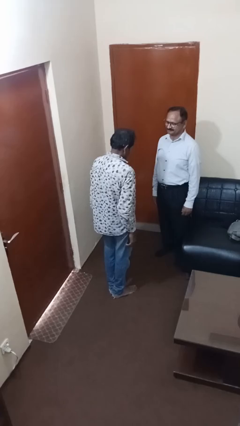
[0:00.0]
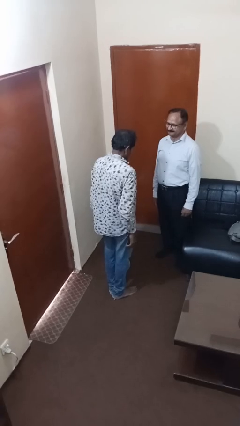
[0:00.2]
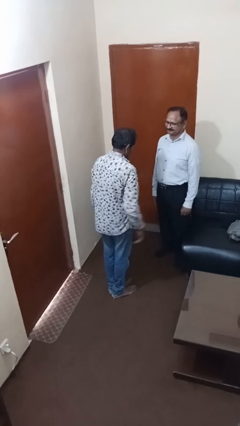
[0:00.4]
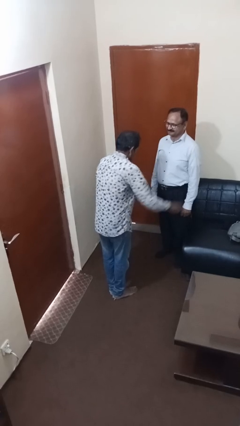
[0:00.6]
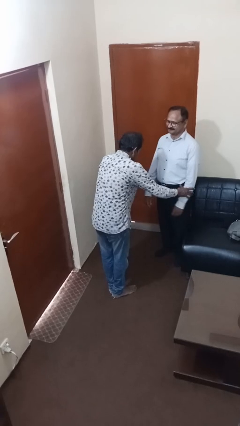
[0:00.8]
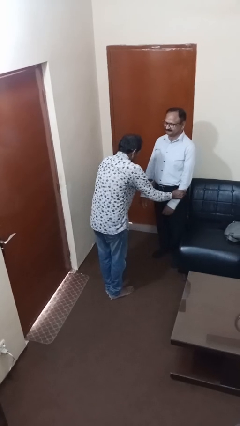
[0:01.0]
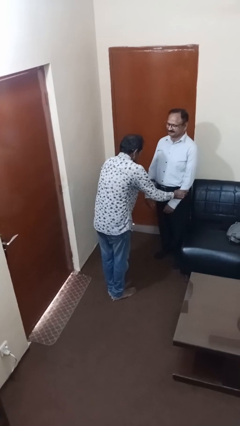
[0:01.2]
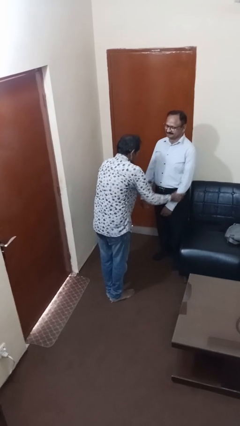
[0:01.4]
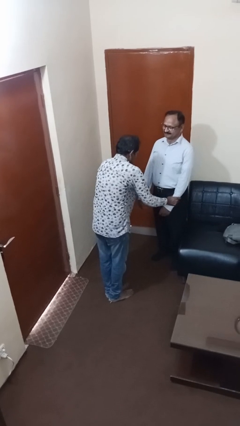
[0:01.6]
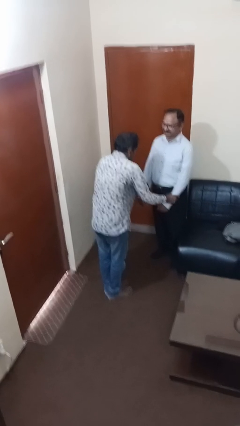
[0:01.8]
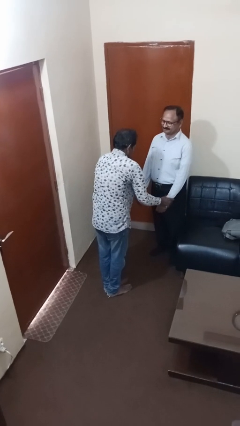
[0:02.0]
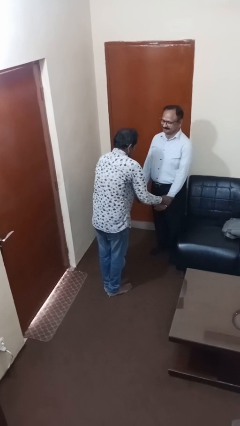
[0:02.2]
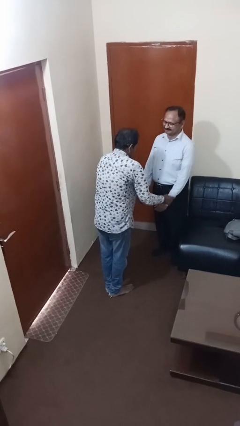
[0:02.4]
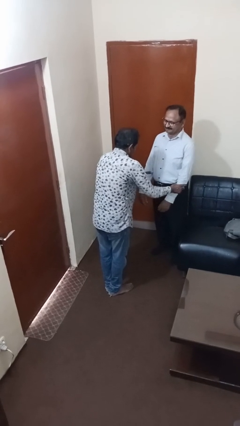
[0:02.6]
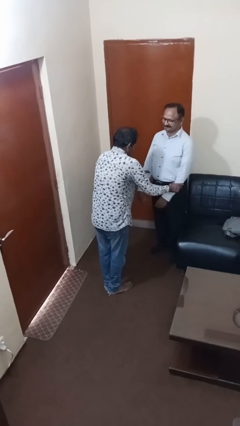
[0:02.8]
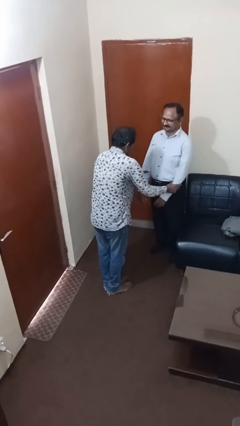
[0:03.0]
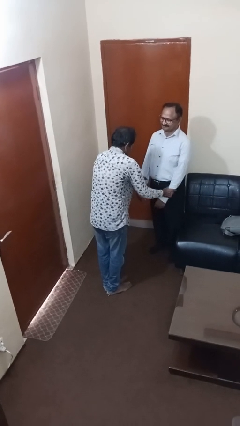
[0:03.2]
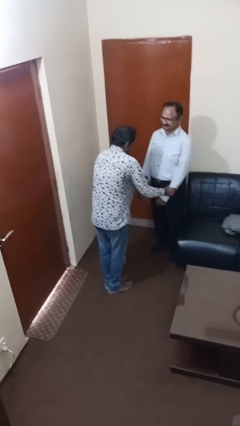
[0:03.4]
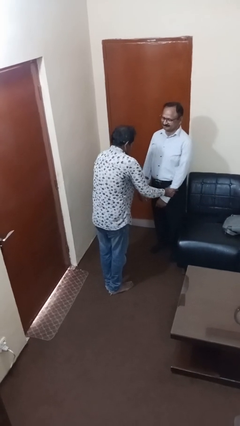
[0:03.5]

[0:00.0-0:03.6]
person grabs person by forearm

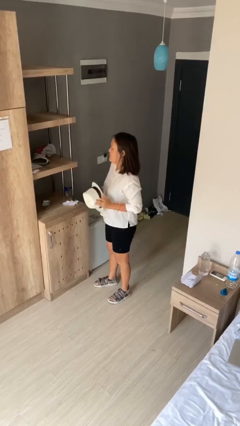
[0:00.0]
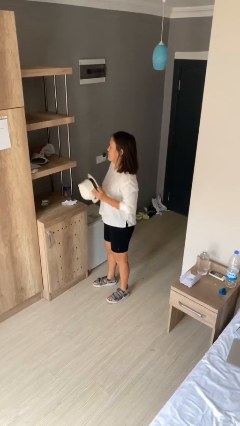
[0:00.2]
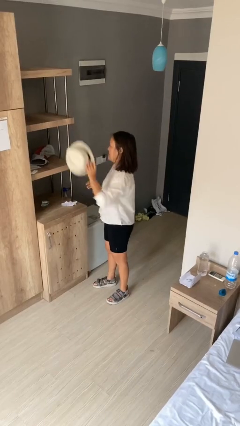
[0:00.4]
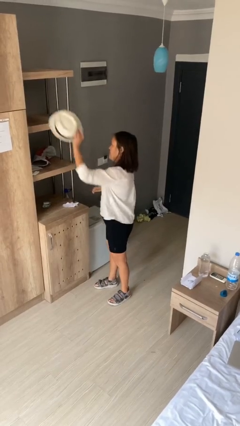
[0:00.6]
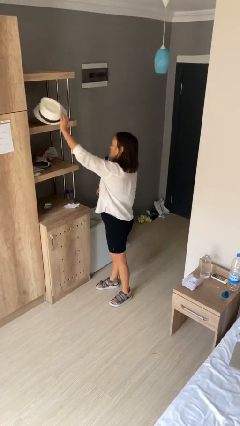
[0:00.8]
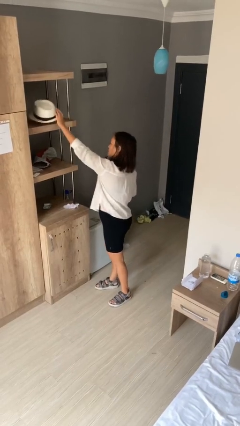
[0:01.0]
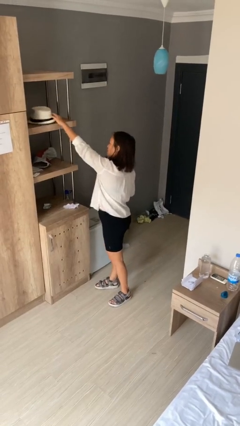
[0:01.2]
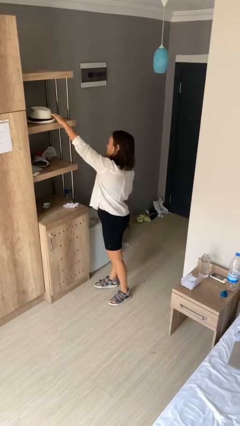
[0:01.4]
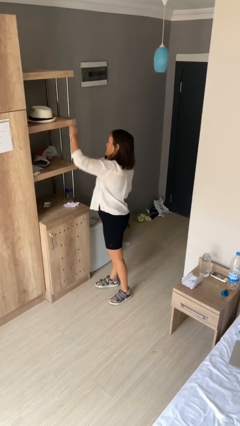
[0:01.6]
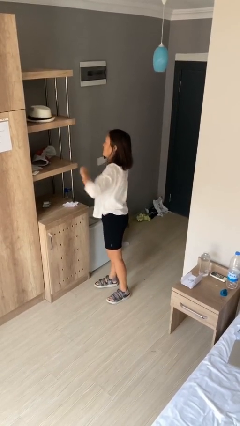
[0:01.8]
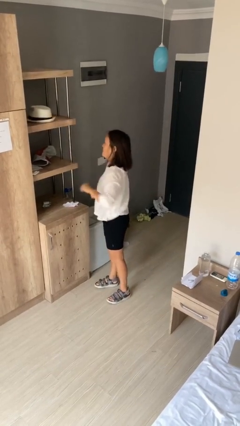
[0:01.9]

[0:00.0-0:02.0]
person puts down object on shelf

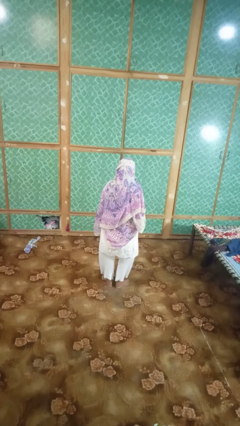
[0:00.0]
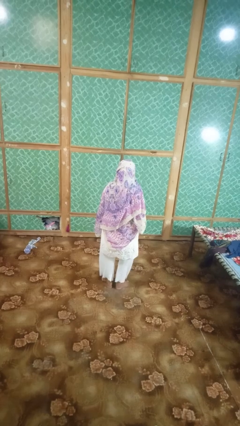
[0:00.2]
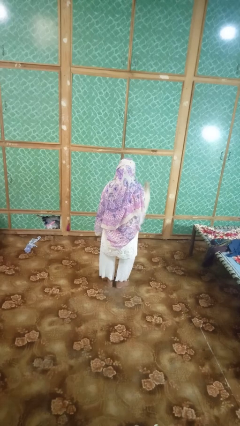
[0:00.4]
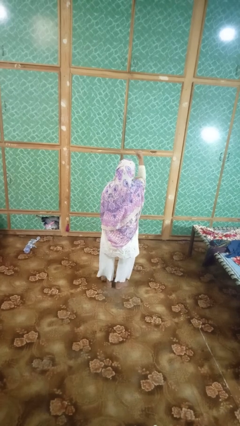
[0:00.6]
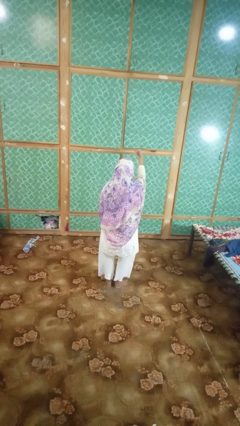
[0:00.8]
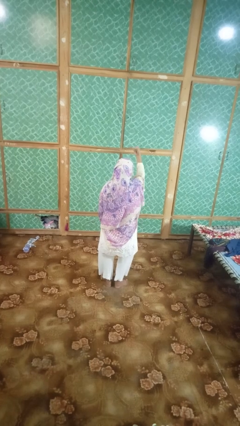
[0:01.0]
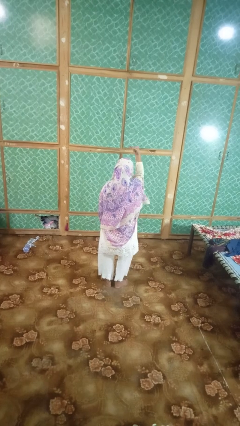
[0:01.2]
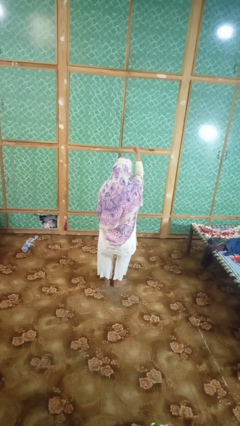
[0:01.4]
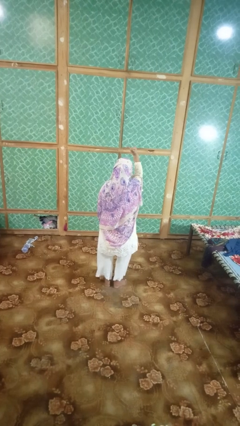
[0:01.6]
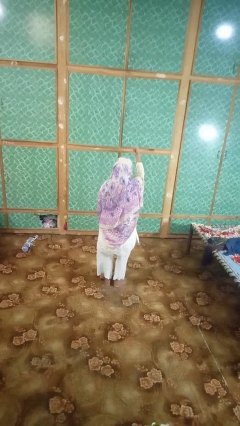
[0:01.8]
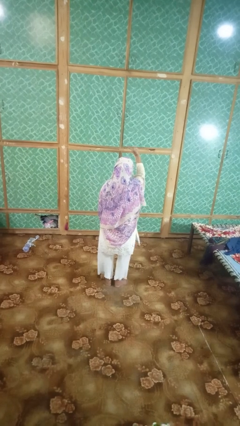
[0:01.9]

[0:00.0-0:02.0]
person gestures hang loose

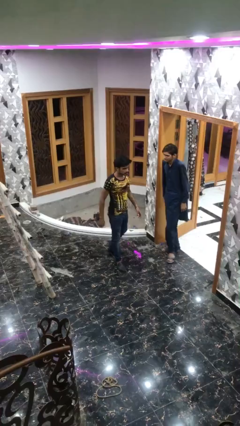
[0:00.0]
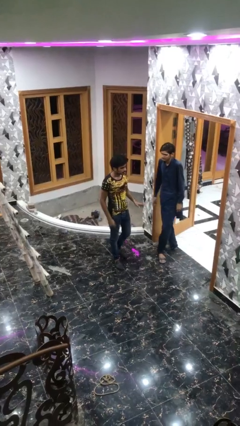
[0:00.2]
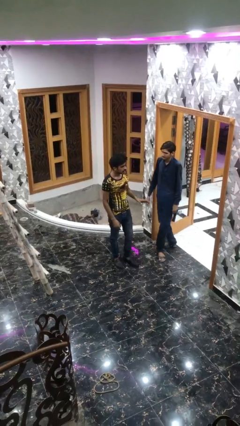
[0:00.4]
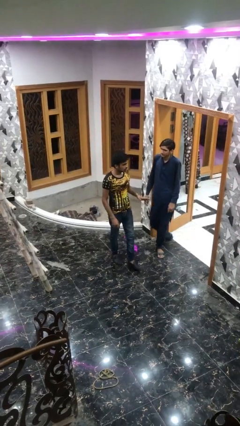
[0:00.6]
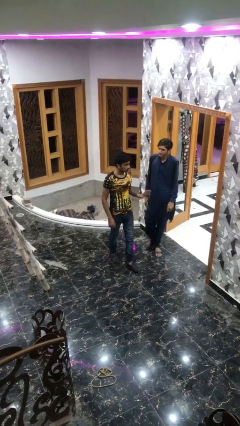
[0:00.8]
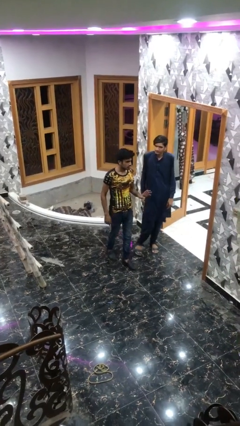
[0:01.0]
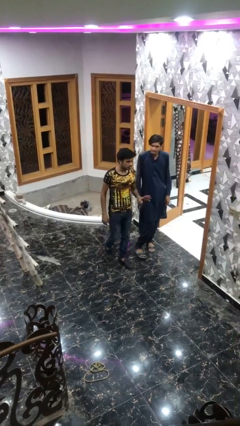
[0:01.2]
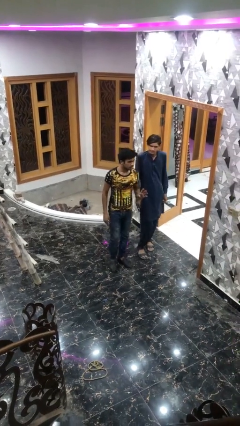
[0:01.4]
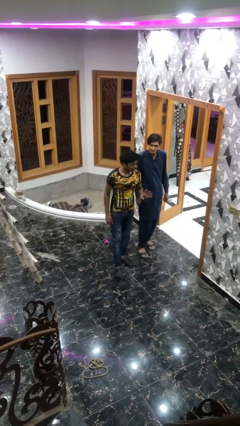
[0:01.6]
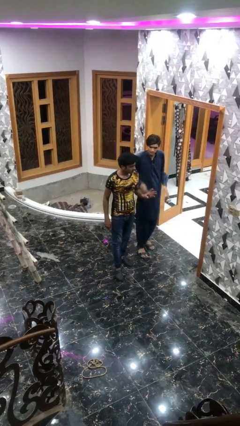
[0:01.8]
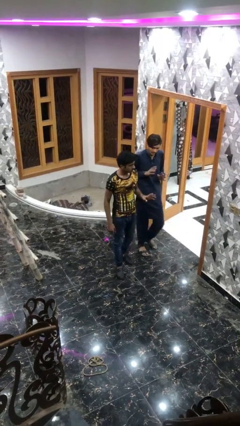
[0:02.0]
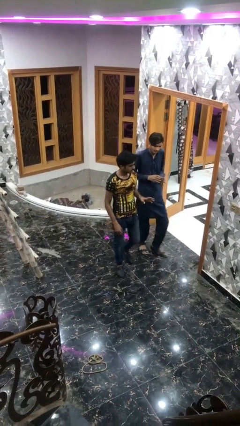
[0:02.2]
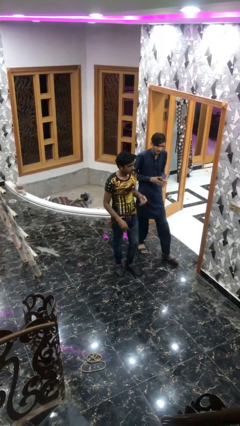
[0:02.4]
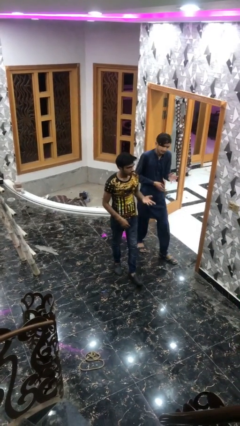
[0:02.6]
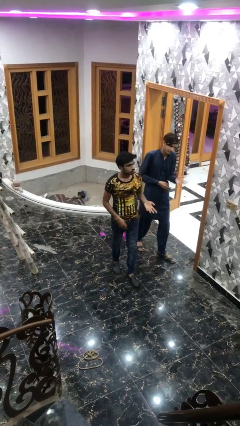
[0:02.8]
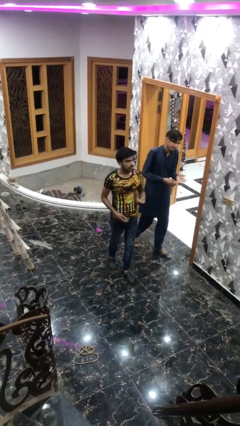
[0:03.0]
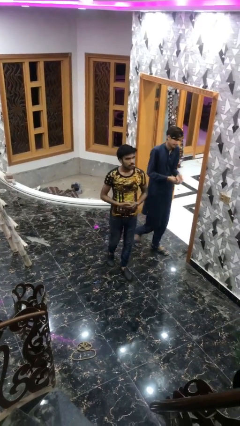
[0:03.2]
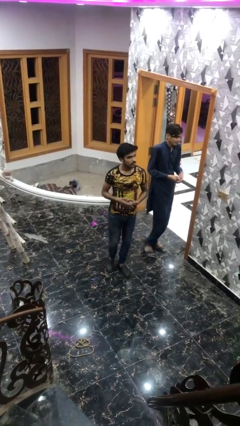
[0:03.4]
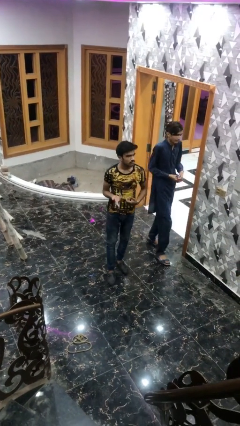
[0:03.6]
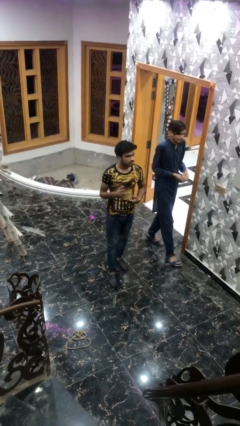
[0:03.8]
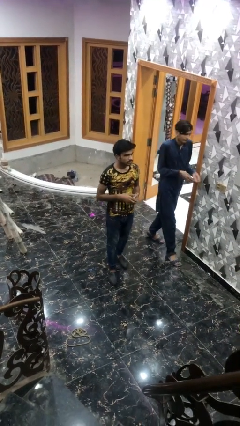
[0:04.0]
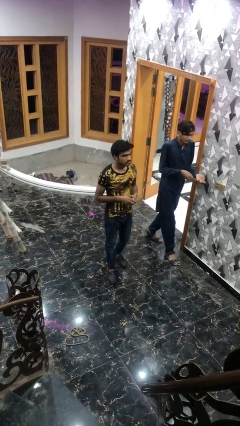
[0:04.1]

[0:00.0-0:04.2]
person talks to person

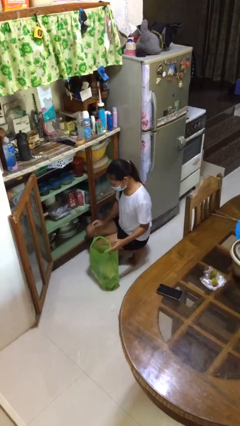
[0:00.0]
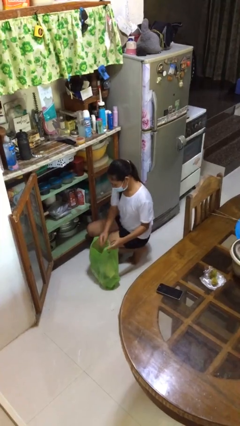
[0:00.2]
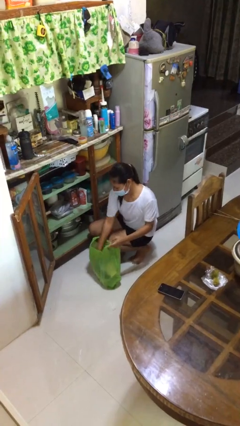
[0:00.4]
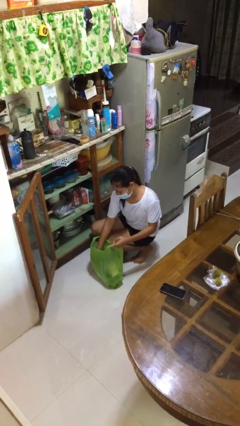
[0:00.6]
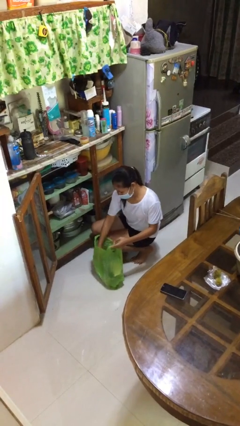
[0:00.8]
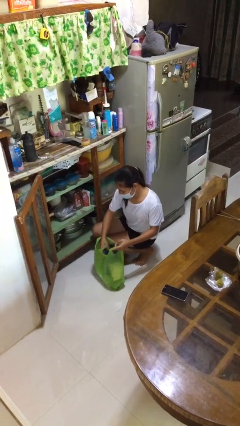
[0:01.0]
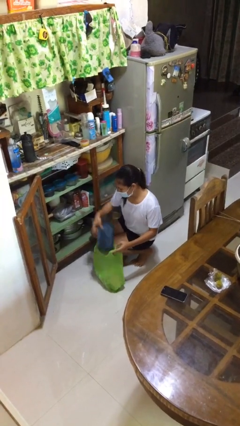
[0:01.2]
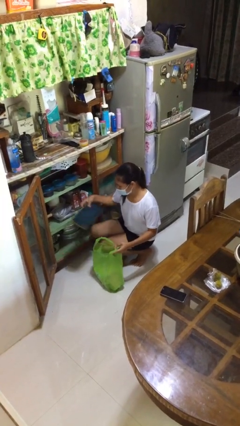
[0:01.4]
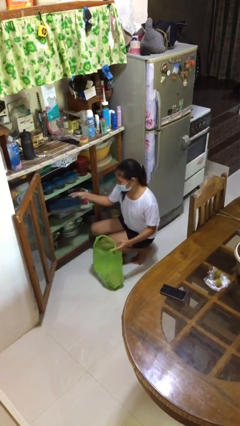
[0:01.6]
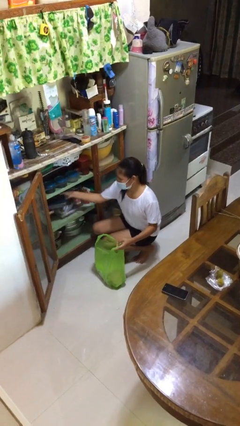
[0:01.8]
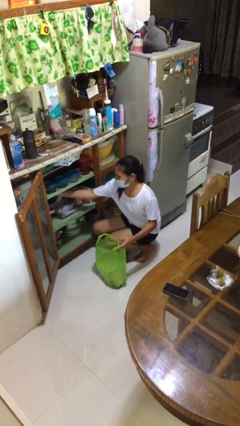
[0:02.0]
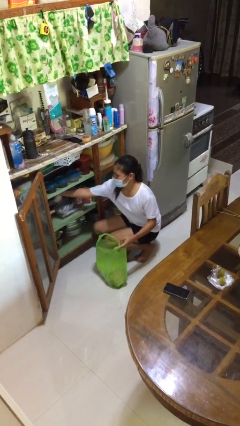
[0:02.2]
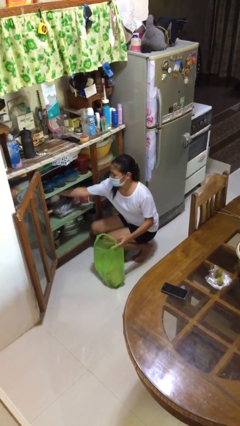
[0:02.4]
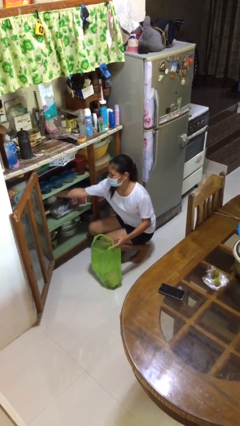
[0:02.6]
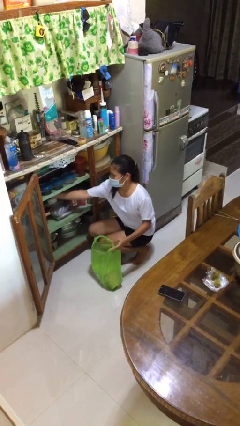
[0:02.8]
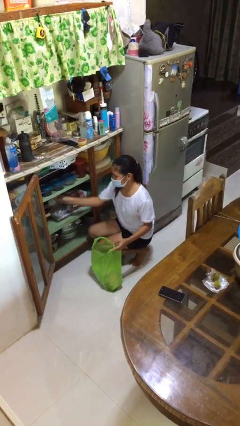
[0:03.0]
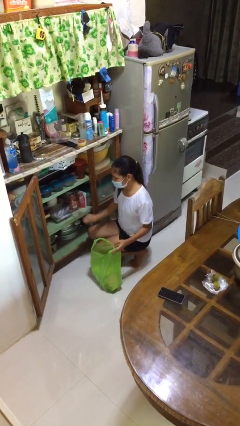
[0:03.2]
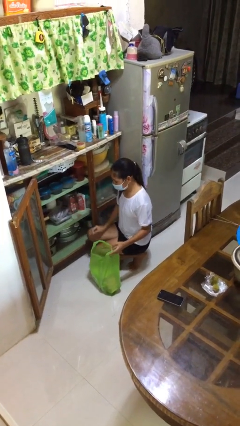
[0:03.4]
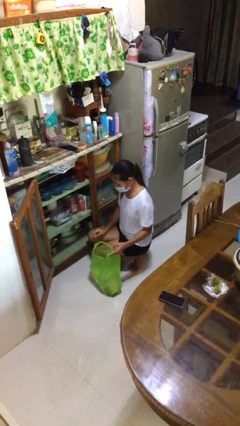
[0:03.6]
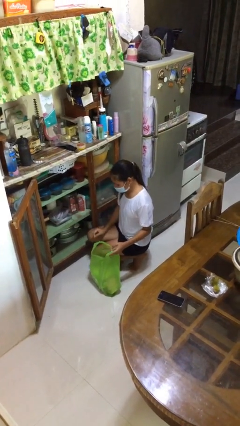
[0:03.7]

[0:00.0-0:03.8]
person loads groceries into cabinet

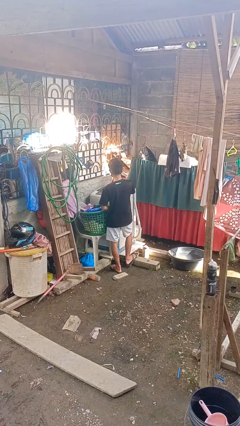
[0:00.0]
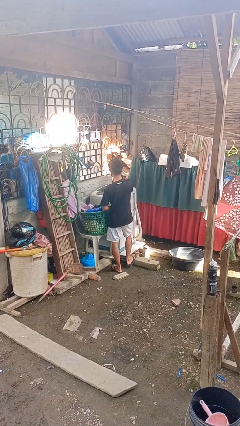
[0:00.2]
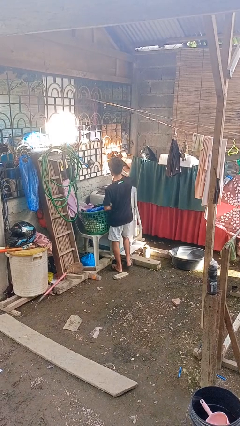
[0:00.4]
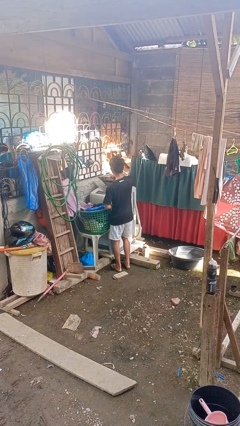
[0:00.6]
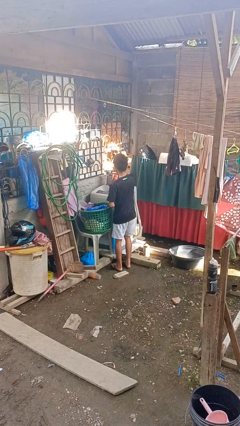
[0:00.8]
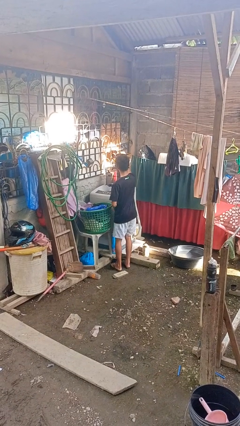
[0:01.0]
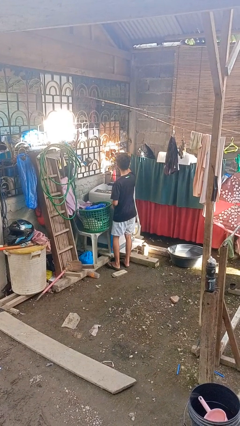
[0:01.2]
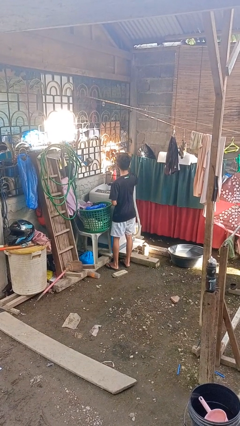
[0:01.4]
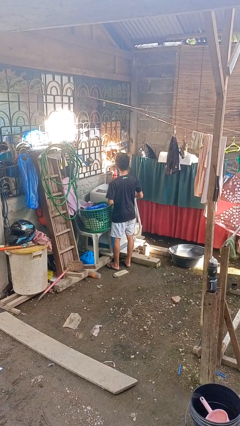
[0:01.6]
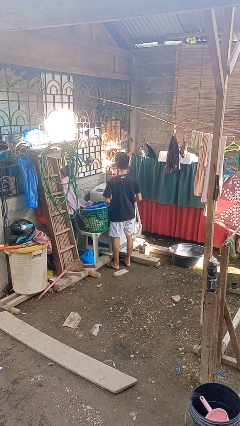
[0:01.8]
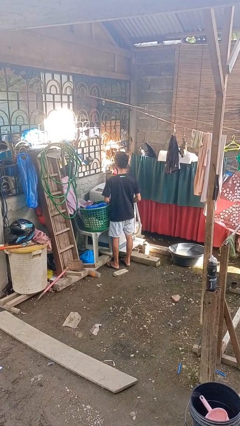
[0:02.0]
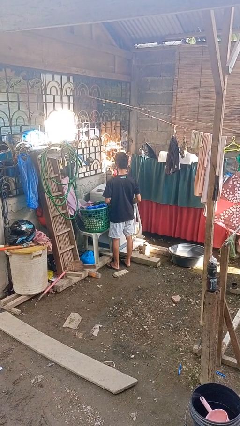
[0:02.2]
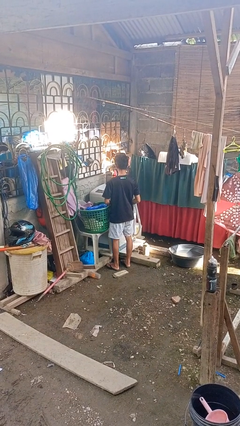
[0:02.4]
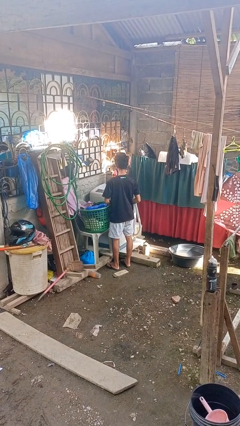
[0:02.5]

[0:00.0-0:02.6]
person opens clothes washer
